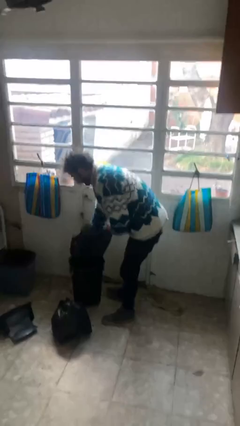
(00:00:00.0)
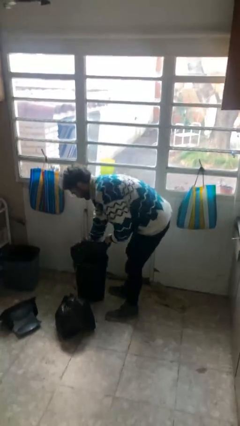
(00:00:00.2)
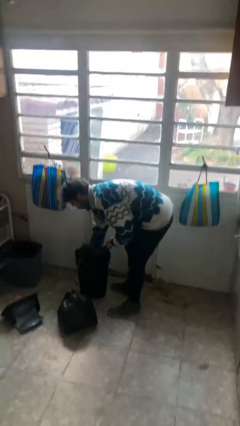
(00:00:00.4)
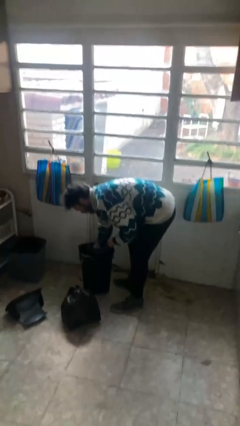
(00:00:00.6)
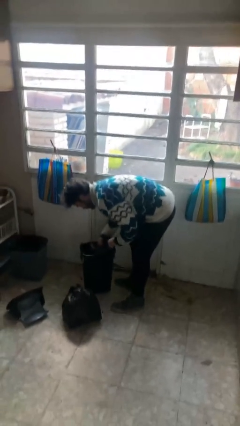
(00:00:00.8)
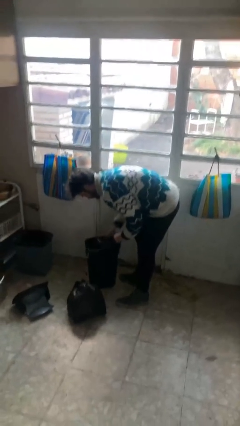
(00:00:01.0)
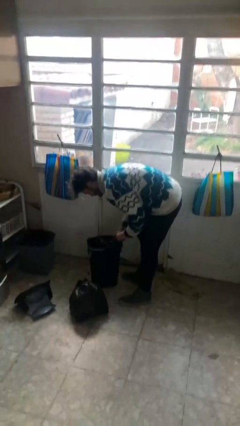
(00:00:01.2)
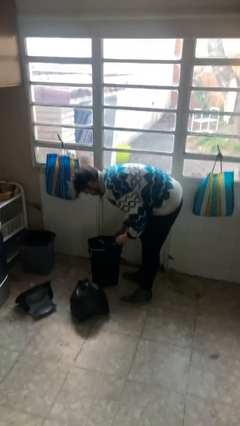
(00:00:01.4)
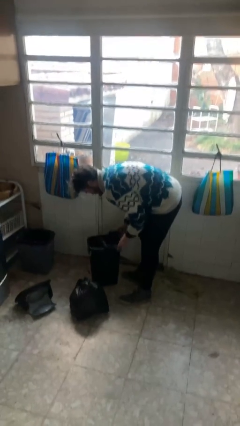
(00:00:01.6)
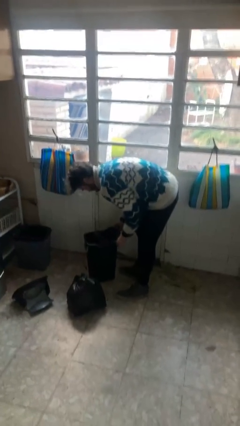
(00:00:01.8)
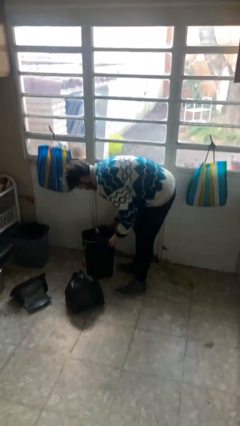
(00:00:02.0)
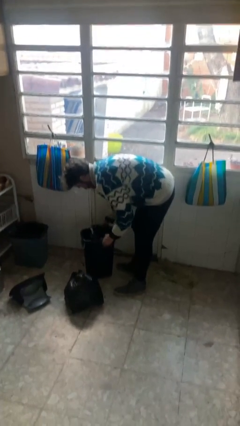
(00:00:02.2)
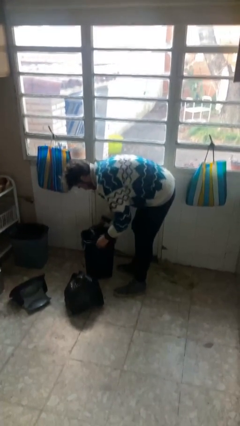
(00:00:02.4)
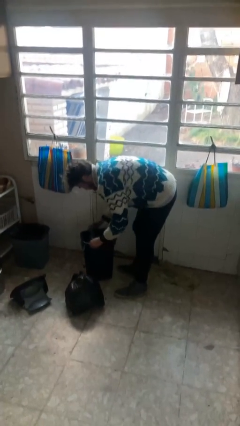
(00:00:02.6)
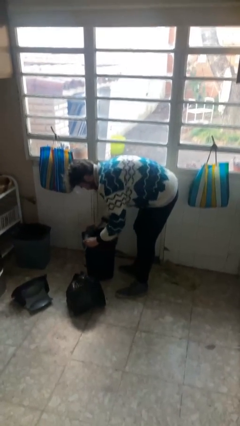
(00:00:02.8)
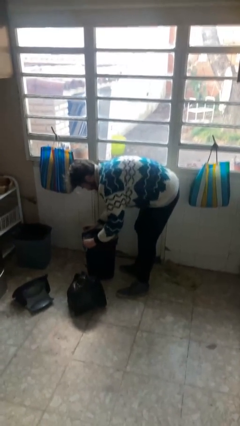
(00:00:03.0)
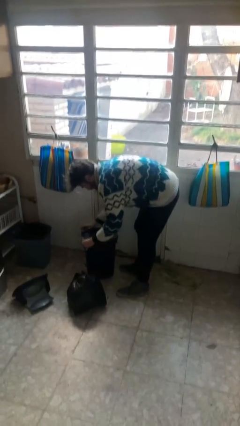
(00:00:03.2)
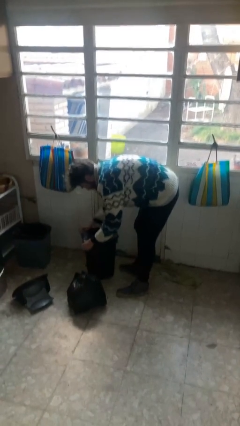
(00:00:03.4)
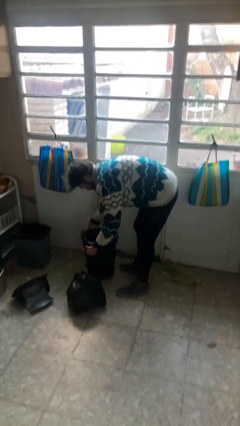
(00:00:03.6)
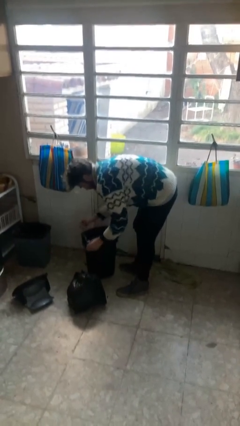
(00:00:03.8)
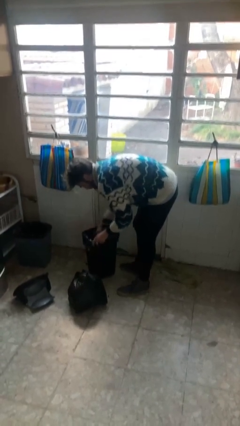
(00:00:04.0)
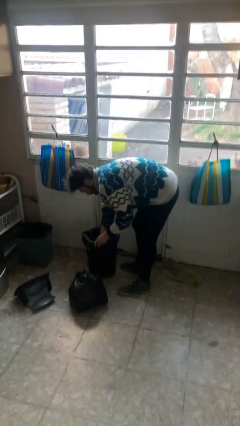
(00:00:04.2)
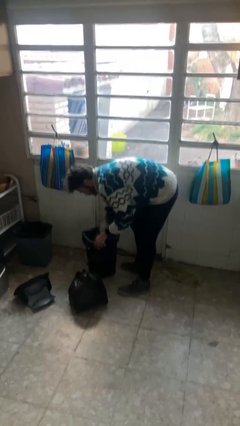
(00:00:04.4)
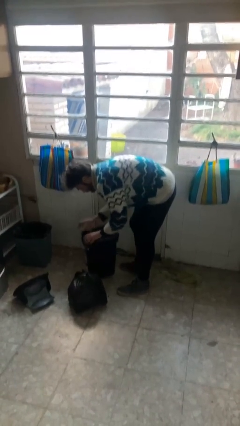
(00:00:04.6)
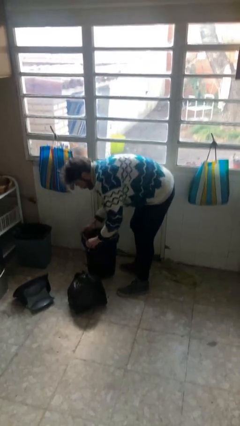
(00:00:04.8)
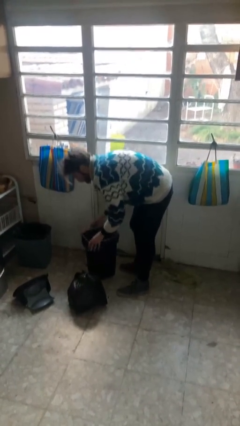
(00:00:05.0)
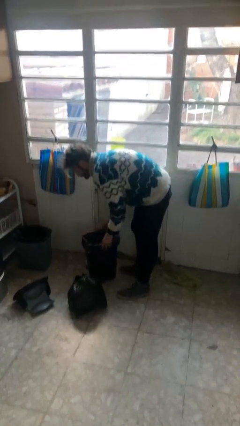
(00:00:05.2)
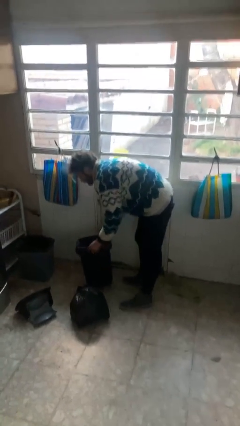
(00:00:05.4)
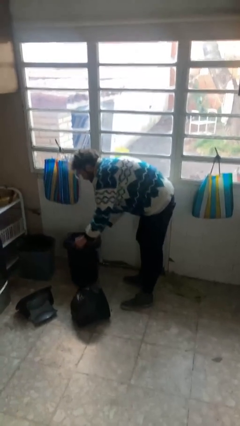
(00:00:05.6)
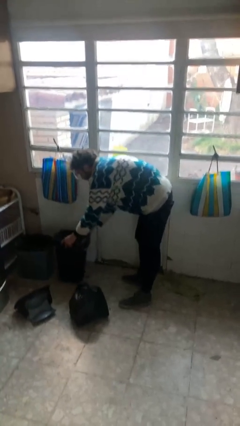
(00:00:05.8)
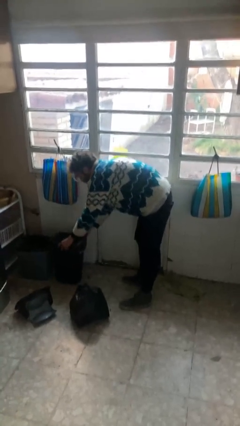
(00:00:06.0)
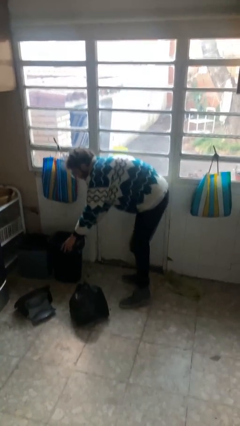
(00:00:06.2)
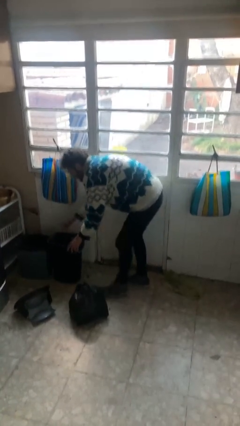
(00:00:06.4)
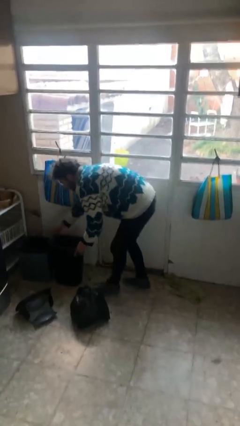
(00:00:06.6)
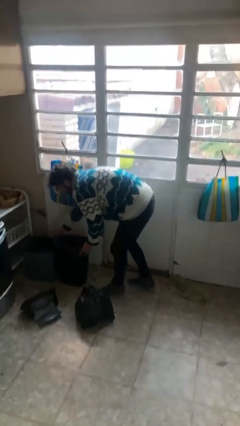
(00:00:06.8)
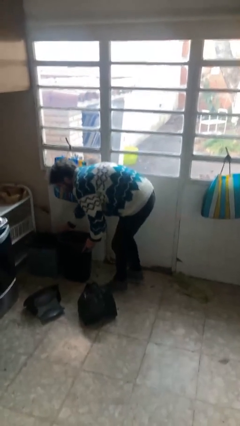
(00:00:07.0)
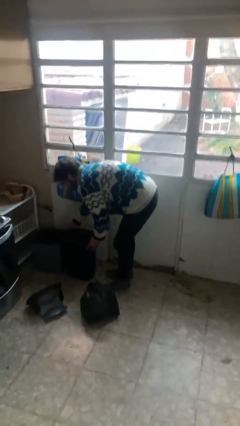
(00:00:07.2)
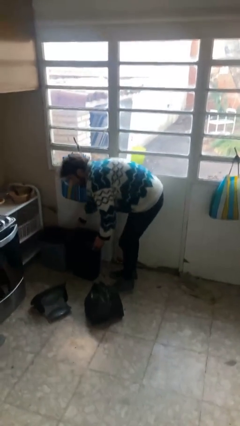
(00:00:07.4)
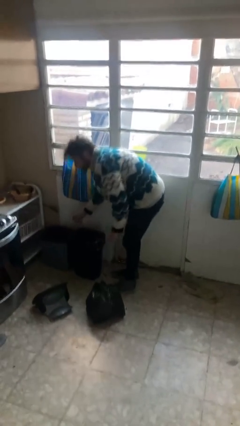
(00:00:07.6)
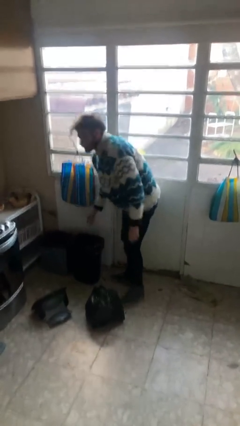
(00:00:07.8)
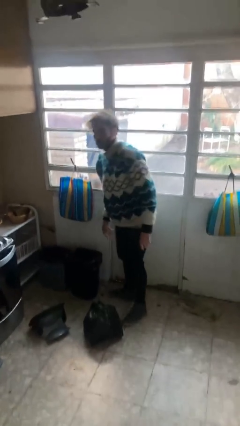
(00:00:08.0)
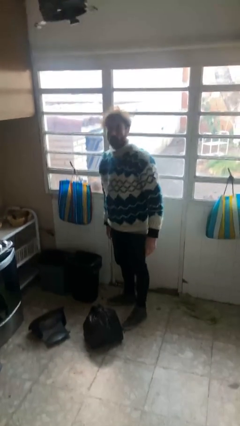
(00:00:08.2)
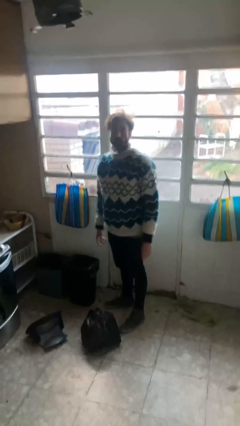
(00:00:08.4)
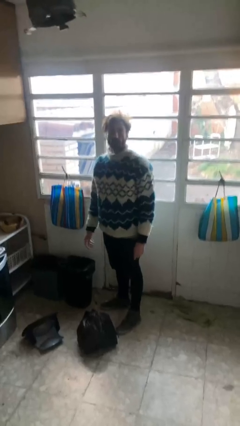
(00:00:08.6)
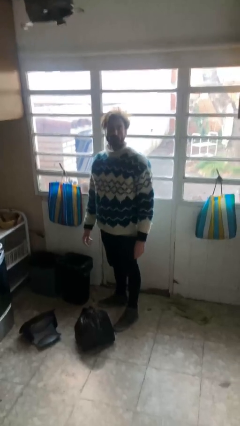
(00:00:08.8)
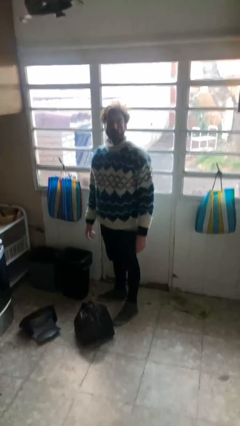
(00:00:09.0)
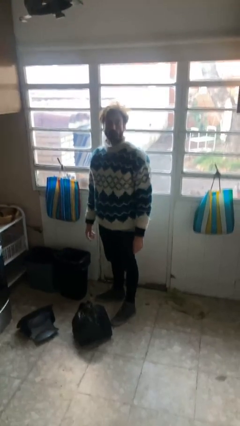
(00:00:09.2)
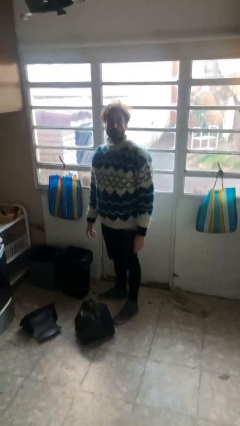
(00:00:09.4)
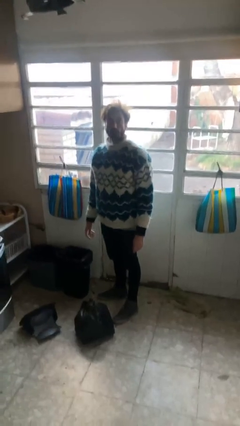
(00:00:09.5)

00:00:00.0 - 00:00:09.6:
person inserts trashbag into trashcan

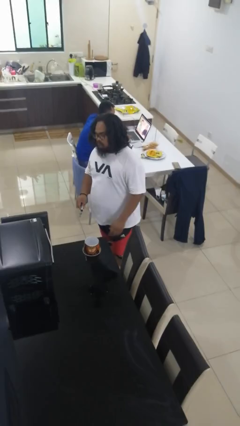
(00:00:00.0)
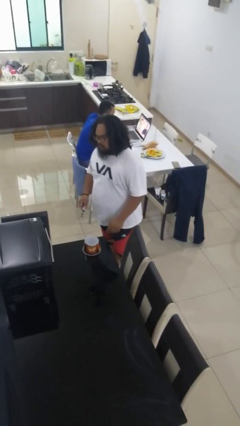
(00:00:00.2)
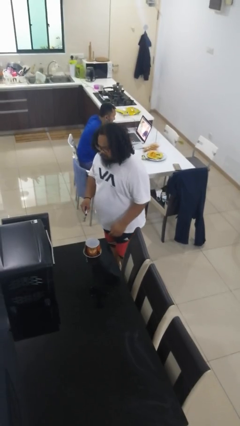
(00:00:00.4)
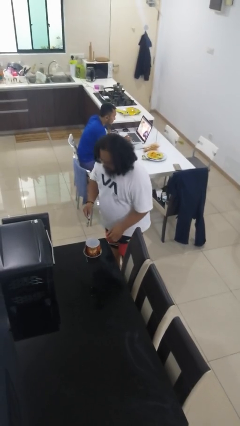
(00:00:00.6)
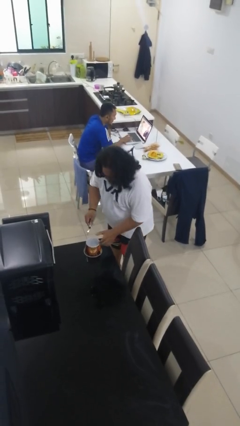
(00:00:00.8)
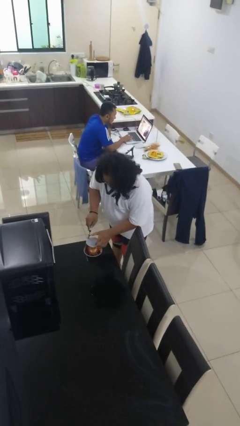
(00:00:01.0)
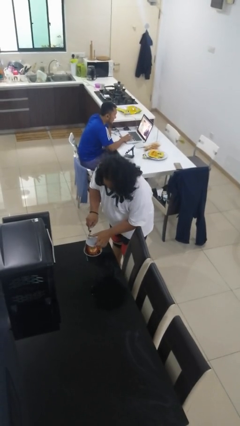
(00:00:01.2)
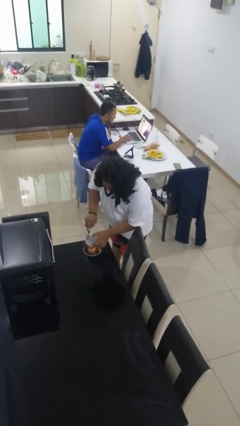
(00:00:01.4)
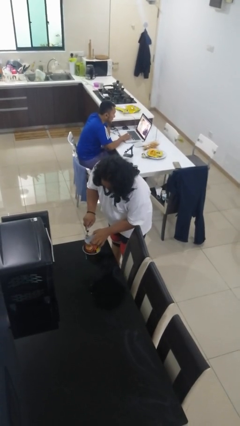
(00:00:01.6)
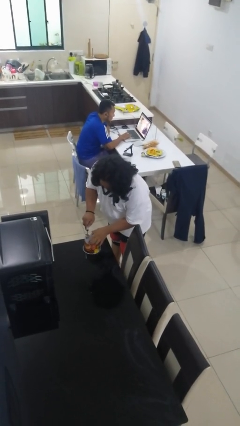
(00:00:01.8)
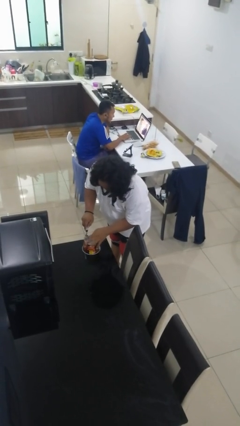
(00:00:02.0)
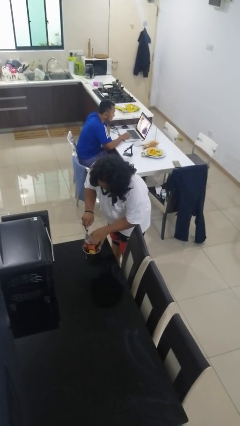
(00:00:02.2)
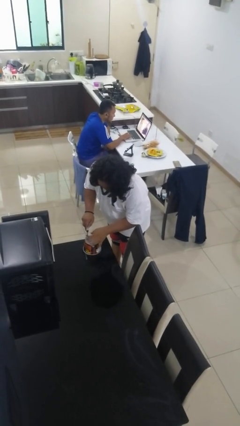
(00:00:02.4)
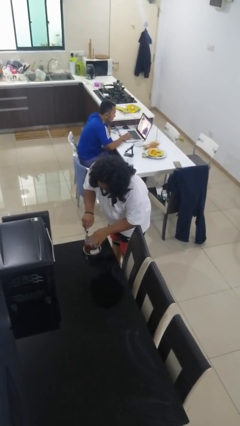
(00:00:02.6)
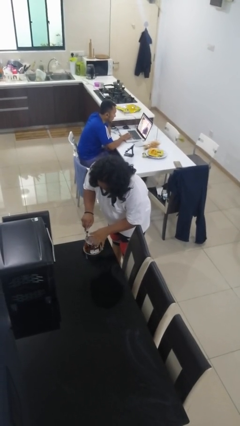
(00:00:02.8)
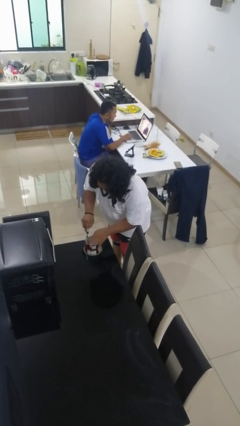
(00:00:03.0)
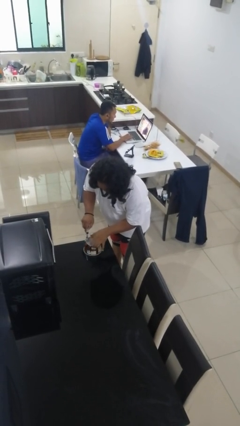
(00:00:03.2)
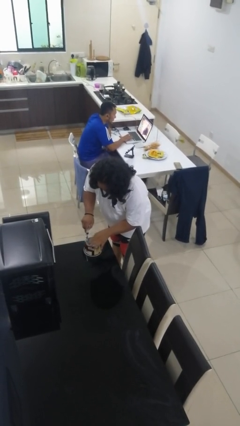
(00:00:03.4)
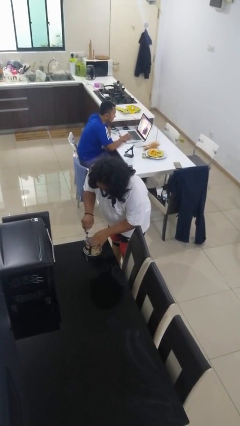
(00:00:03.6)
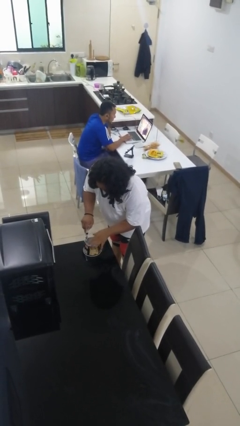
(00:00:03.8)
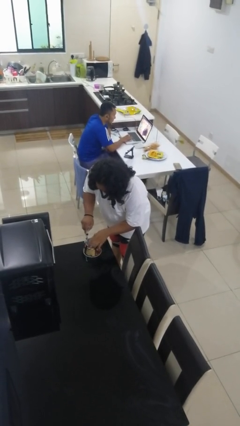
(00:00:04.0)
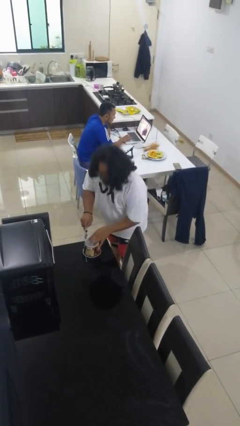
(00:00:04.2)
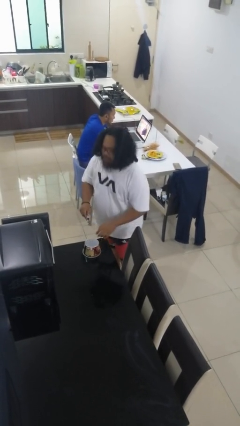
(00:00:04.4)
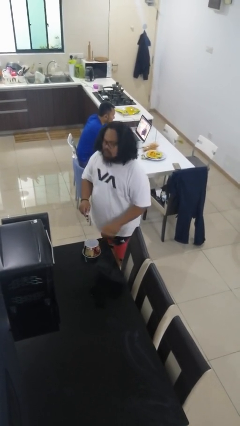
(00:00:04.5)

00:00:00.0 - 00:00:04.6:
person opens can with can opener

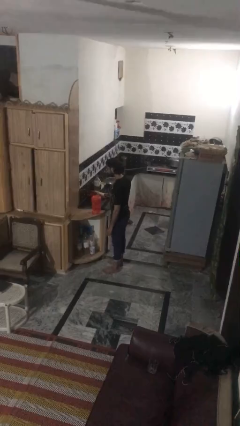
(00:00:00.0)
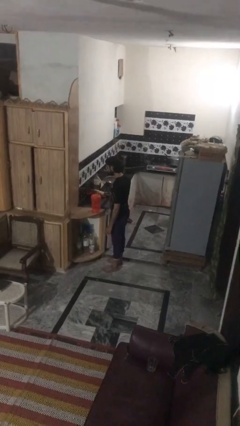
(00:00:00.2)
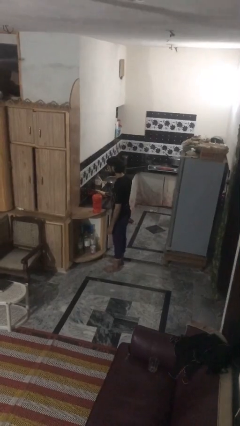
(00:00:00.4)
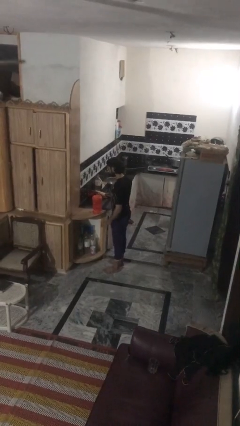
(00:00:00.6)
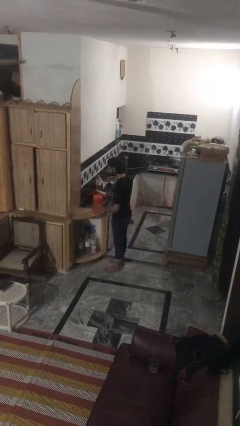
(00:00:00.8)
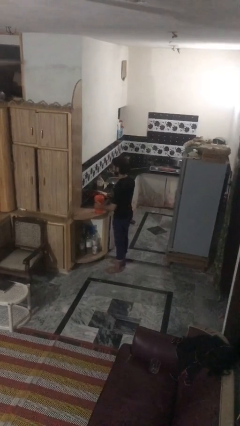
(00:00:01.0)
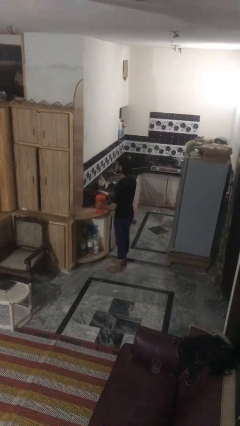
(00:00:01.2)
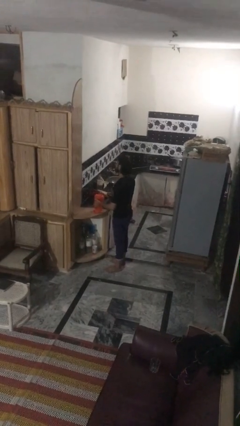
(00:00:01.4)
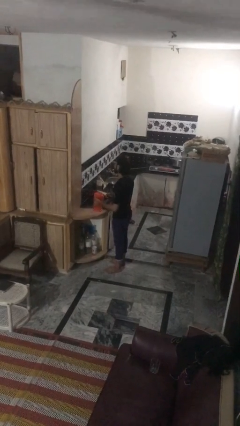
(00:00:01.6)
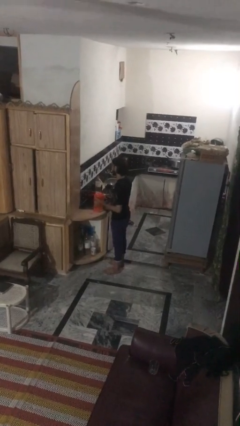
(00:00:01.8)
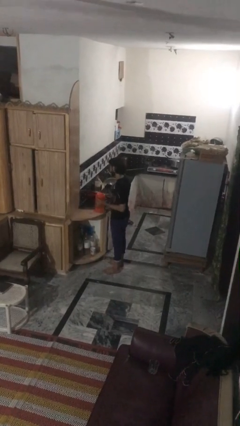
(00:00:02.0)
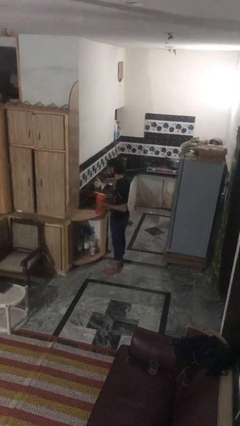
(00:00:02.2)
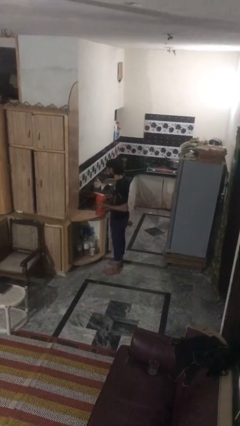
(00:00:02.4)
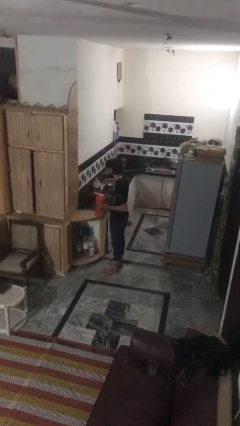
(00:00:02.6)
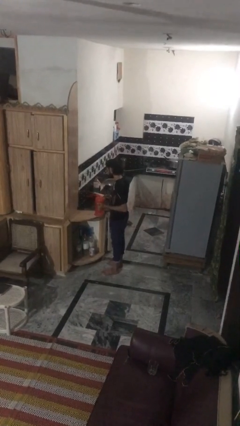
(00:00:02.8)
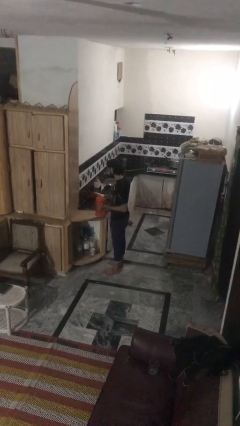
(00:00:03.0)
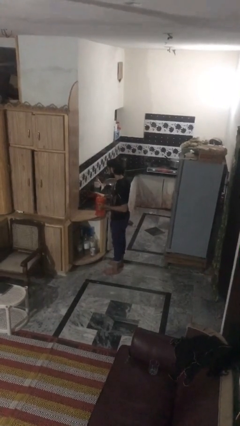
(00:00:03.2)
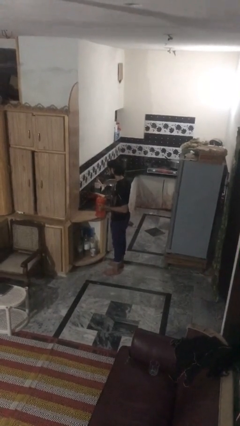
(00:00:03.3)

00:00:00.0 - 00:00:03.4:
person picks up object from countertop
